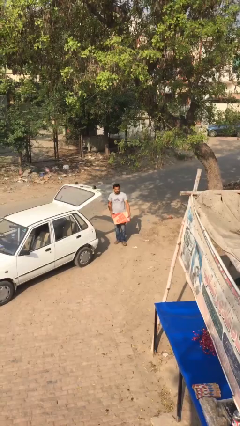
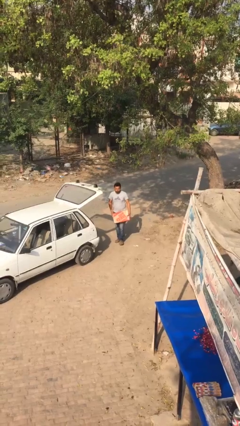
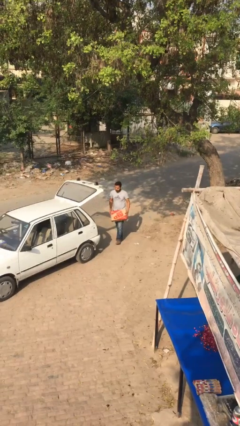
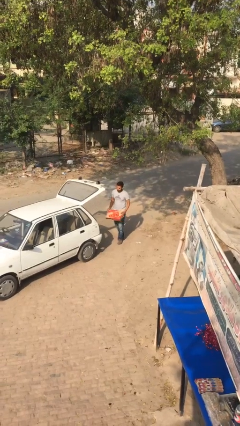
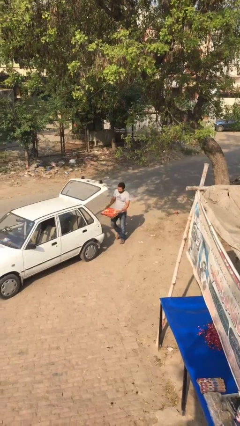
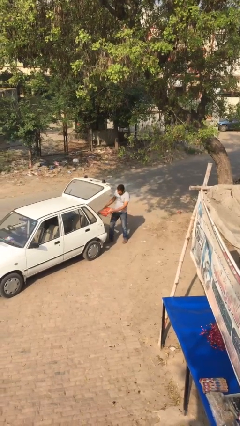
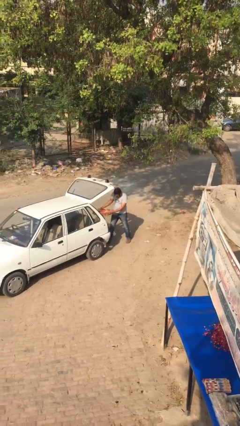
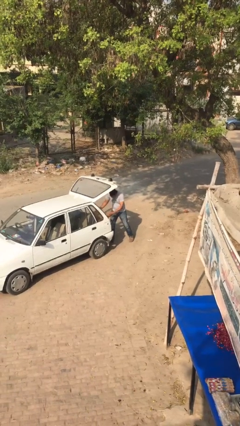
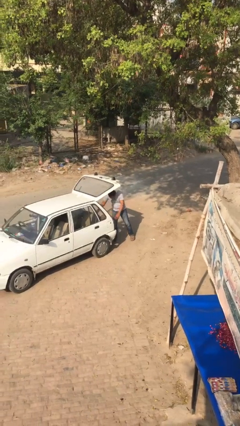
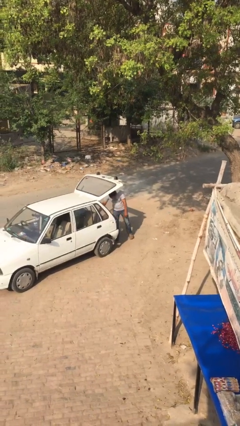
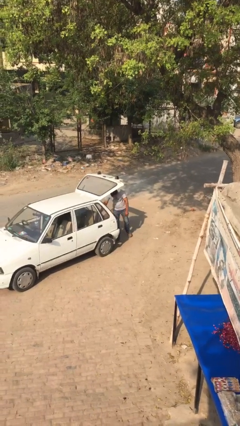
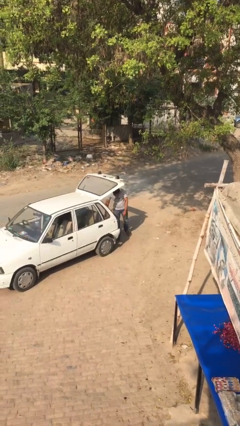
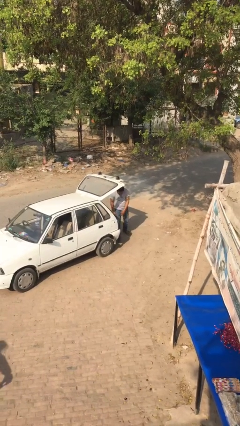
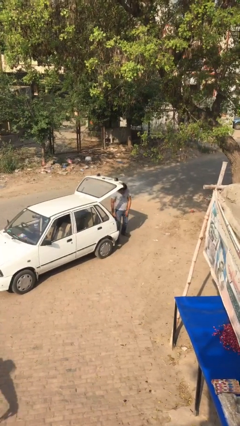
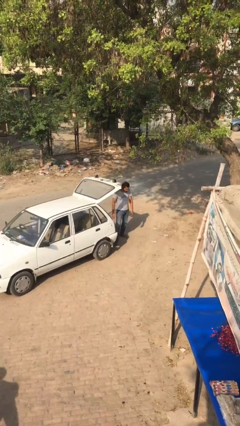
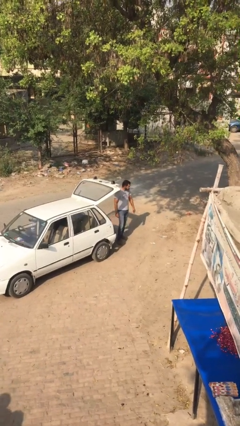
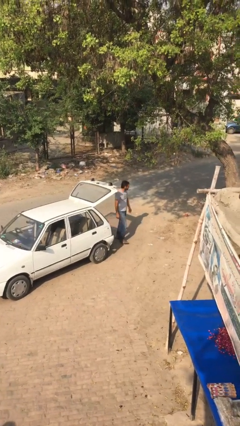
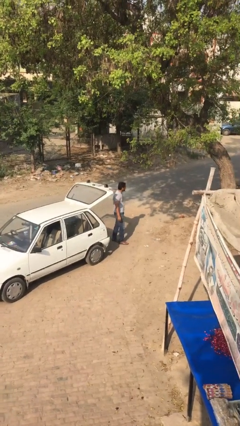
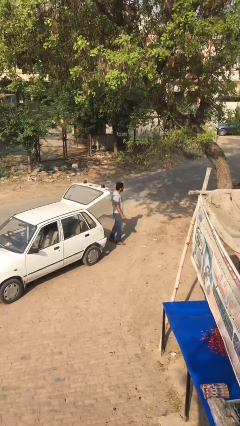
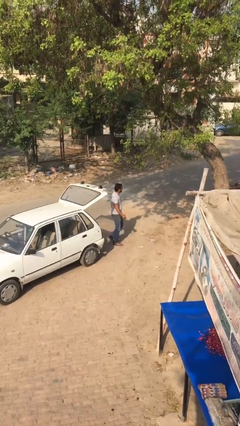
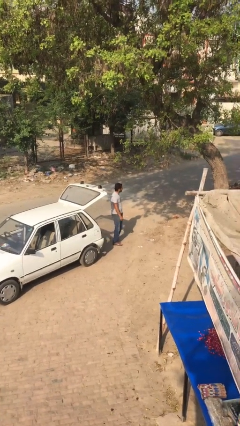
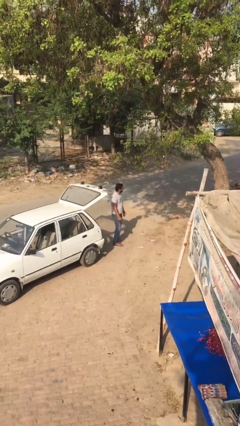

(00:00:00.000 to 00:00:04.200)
person loads car

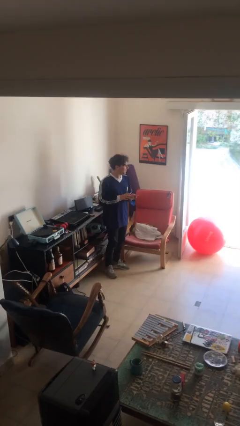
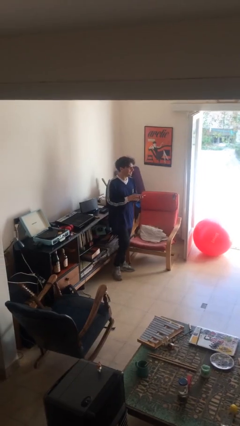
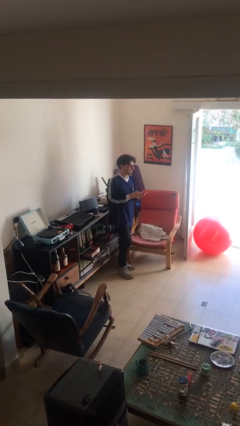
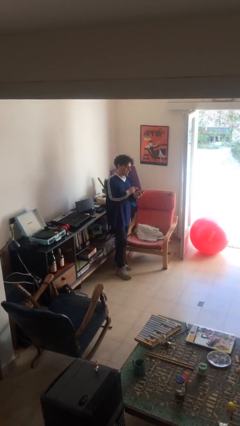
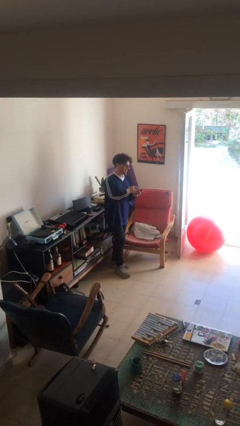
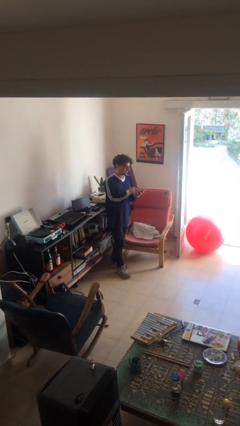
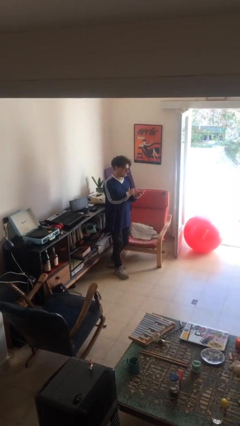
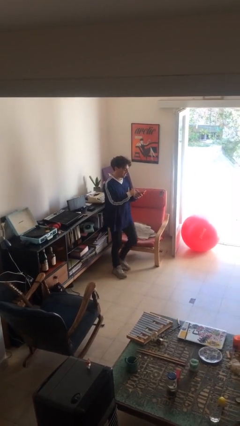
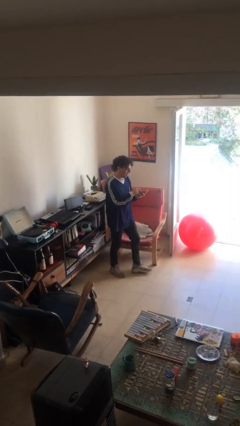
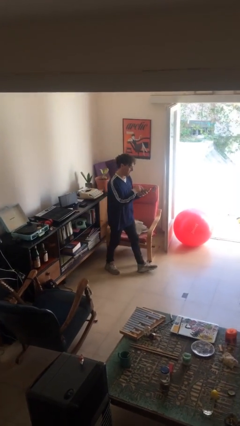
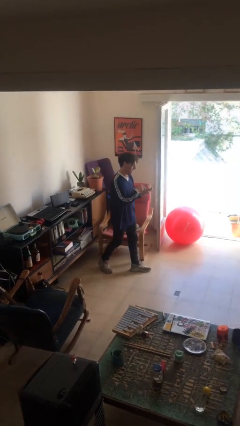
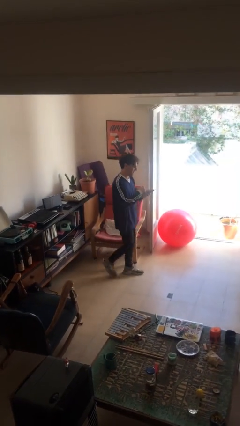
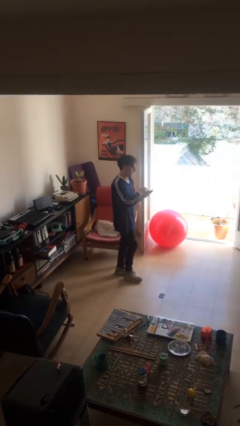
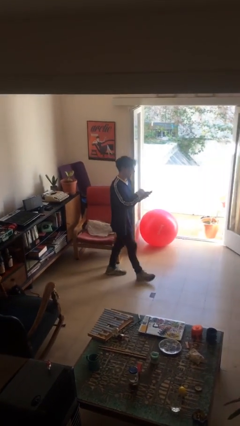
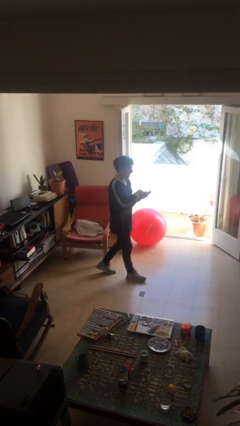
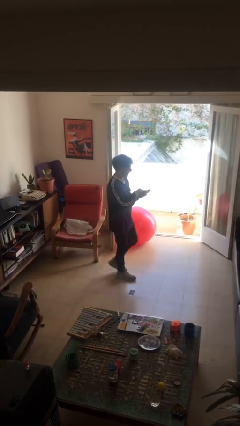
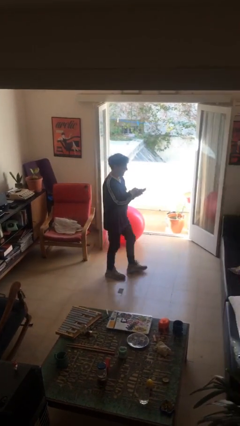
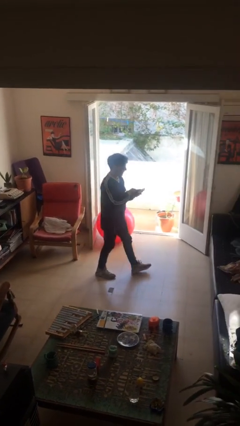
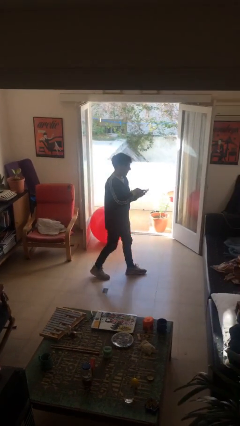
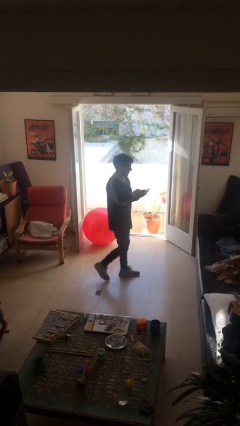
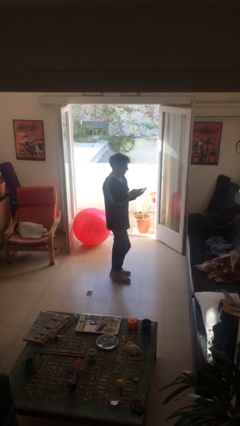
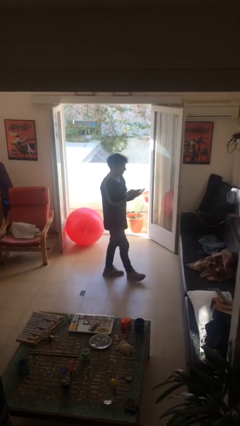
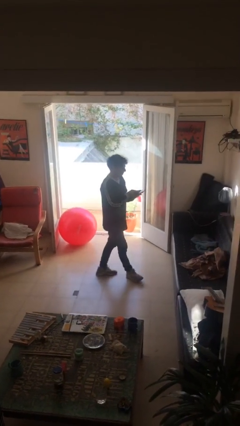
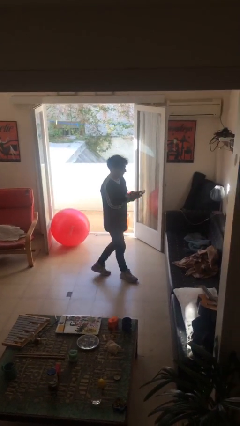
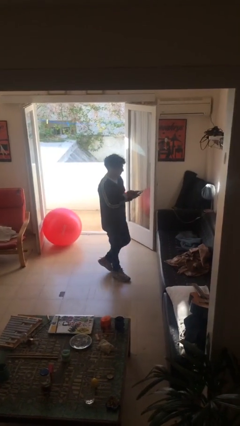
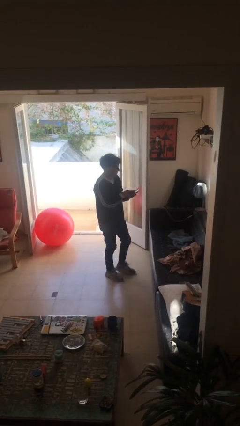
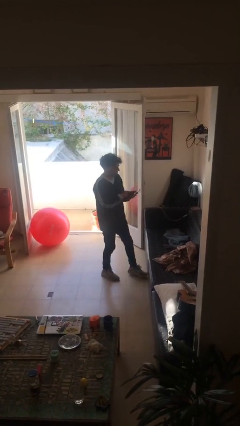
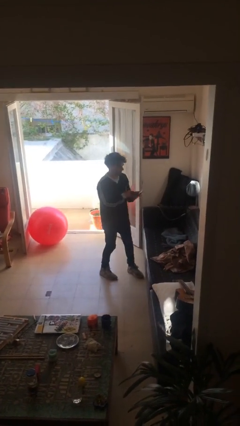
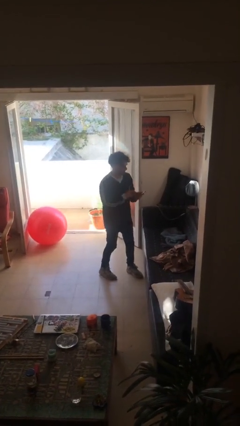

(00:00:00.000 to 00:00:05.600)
person texts on phone

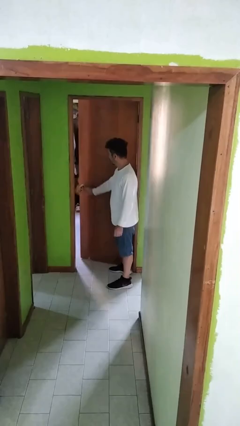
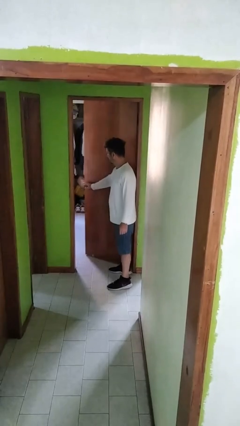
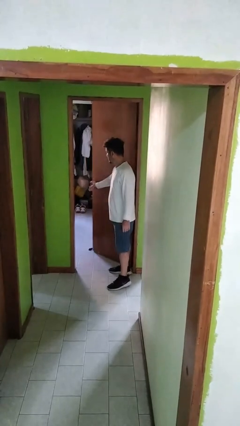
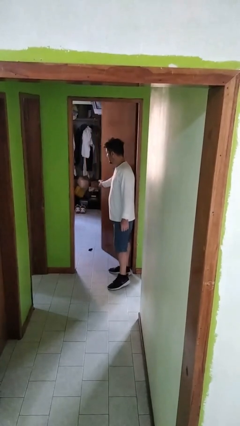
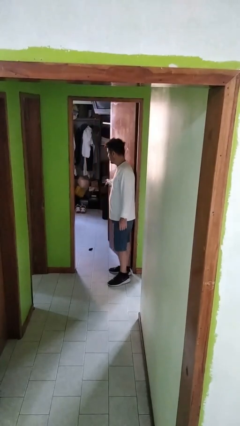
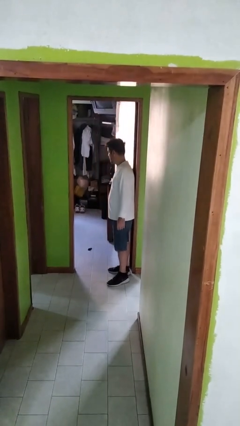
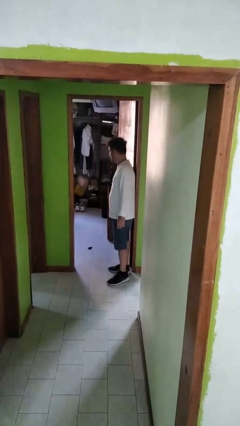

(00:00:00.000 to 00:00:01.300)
person opens facility door

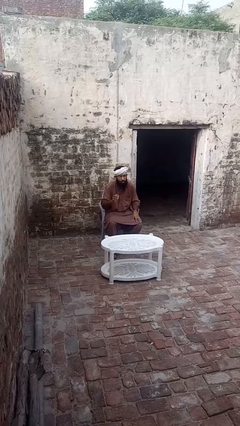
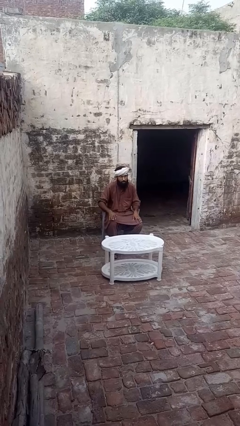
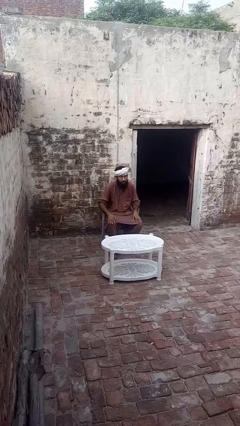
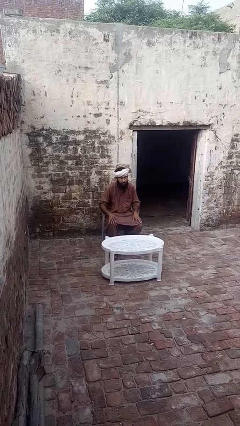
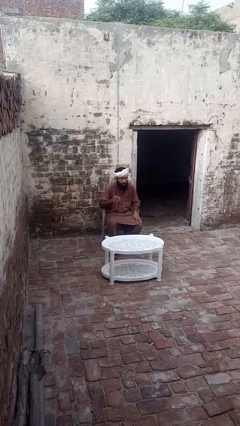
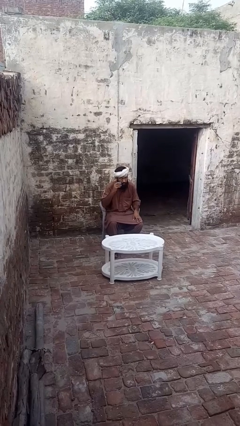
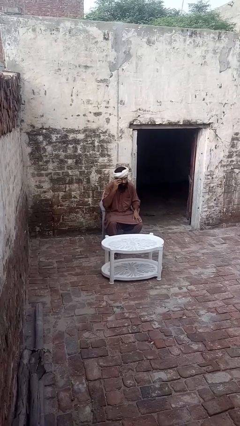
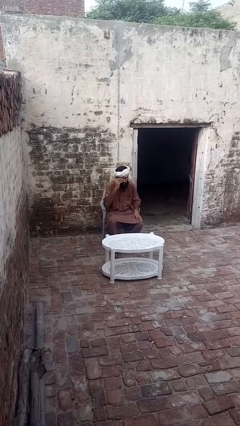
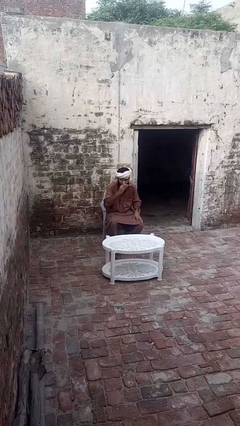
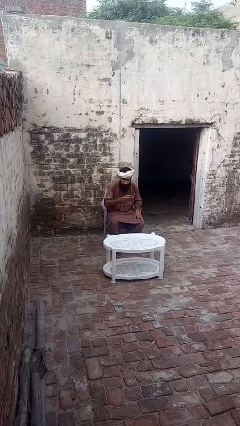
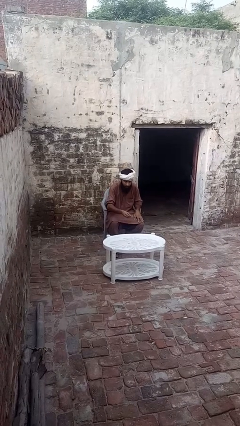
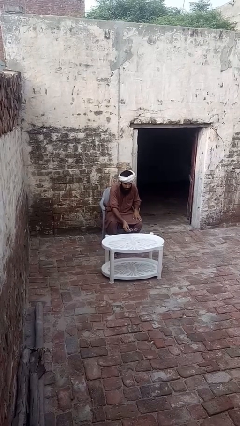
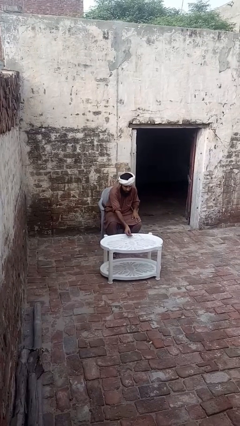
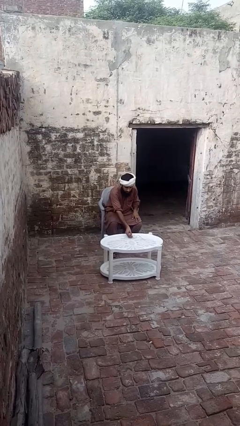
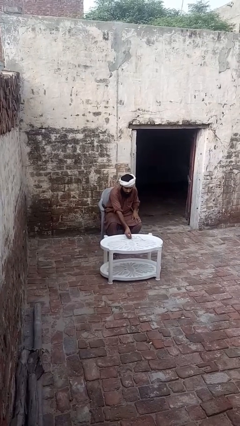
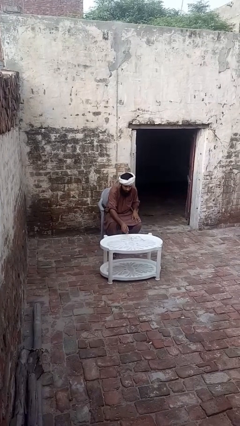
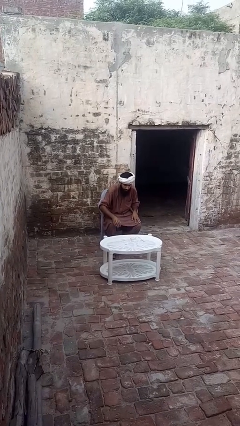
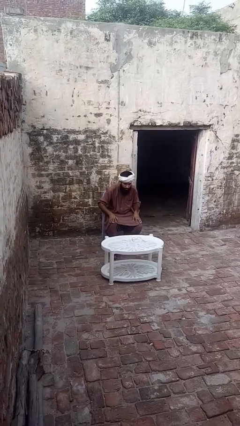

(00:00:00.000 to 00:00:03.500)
person takes off glasses

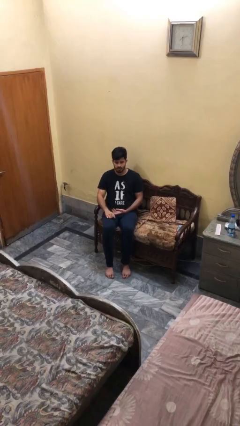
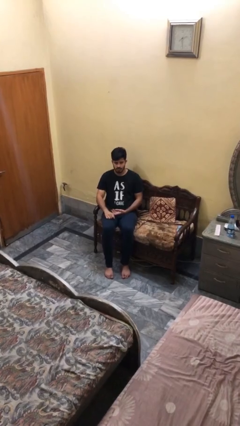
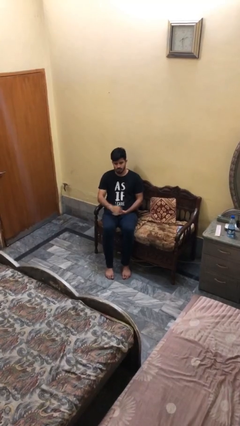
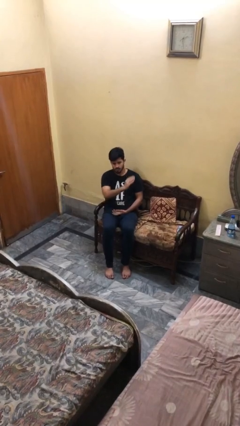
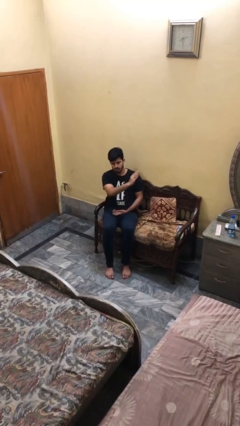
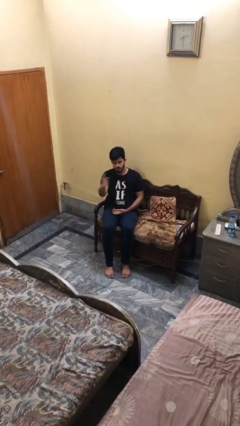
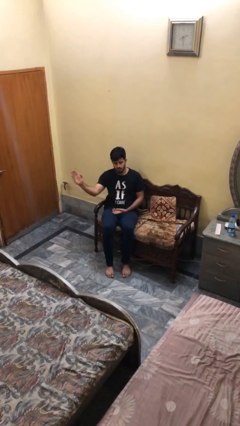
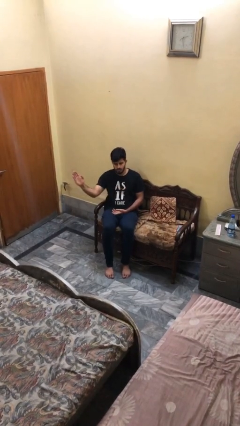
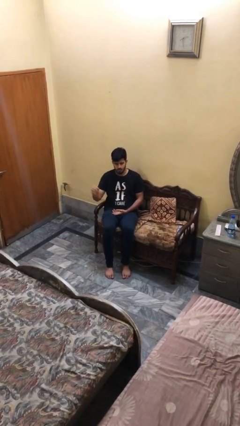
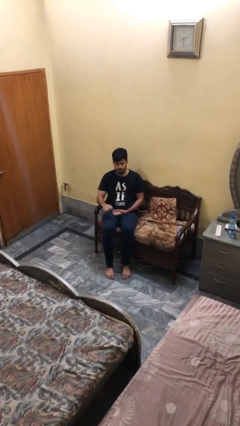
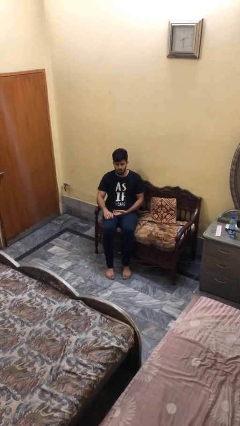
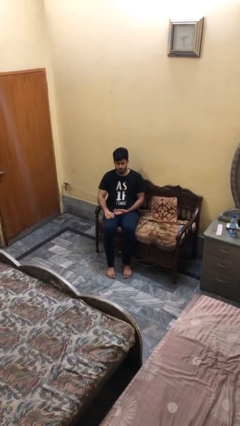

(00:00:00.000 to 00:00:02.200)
person gestures swipe right

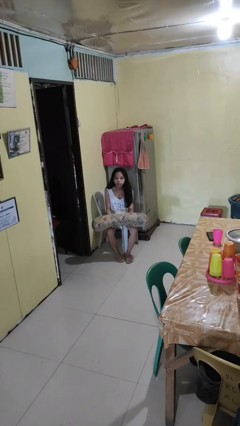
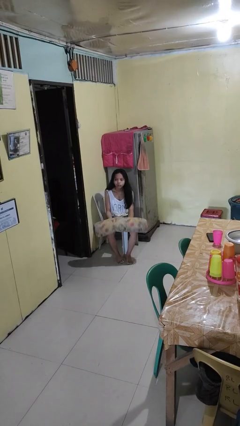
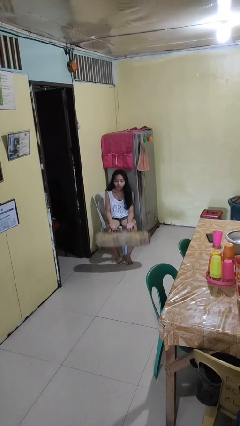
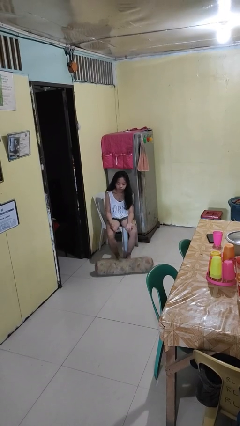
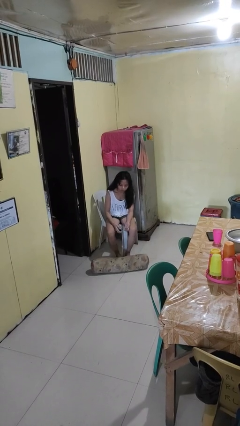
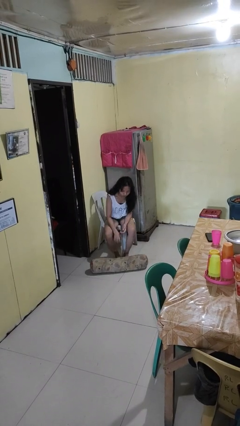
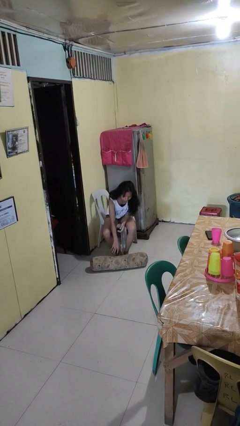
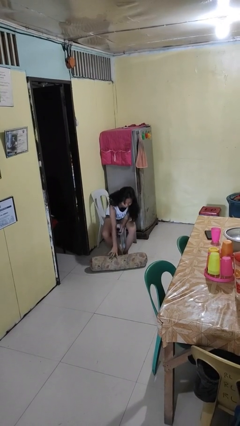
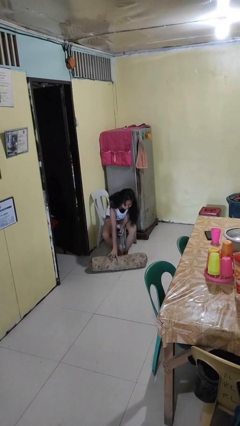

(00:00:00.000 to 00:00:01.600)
person drops object
